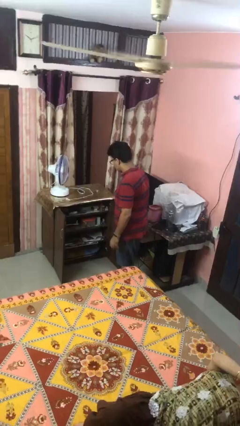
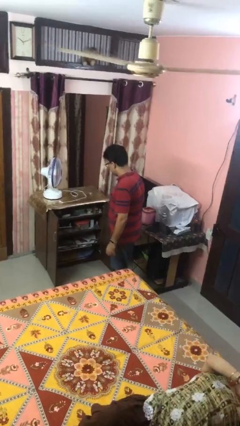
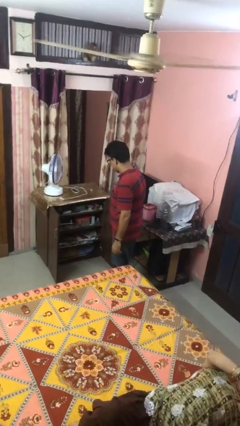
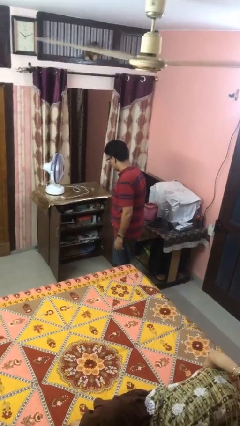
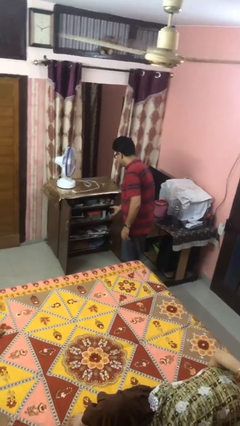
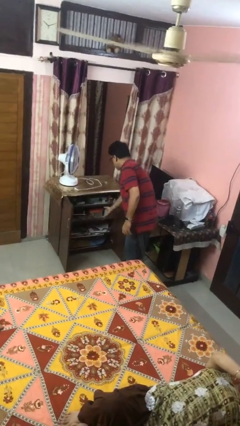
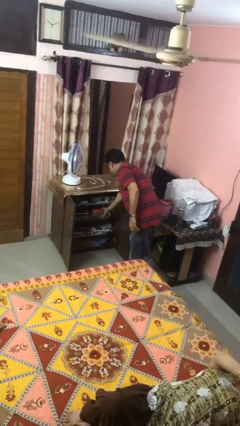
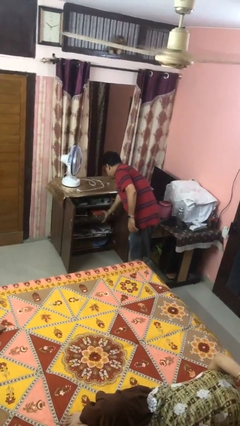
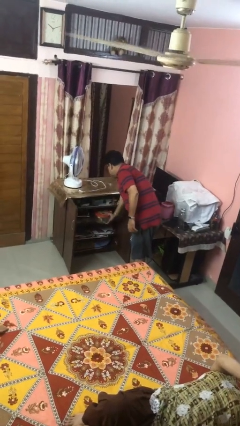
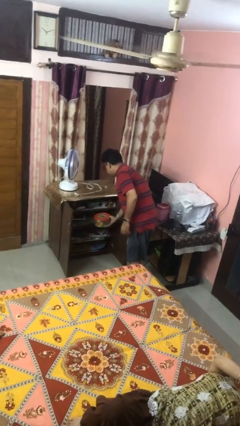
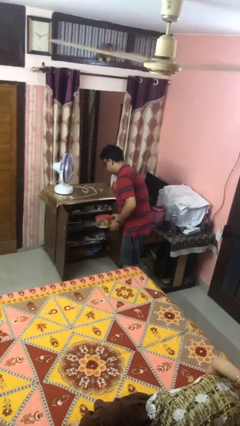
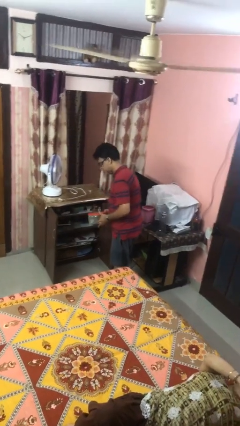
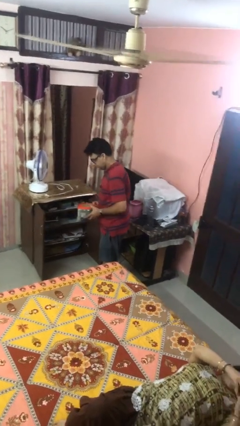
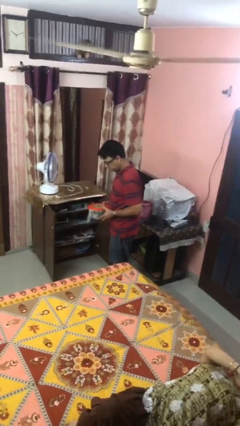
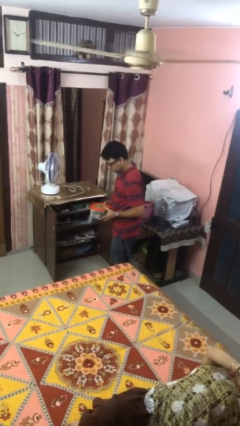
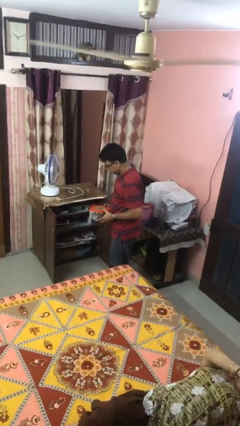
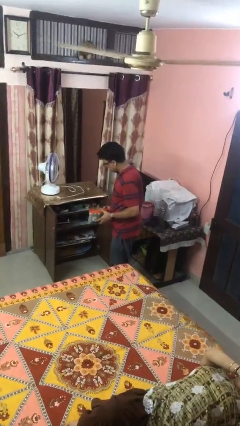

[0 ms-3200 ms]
person picks up object from cabinet

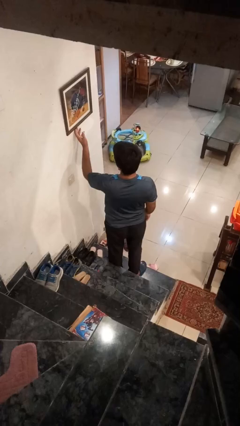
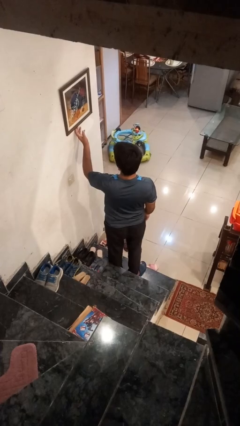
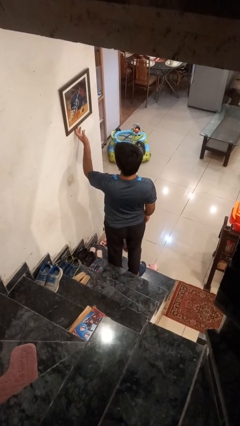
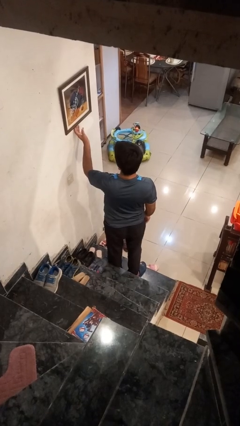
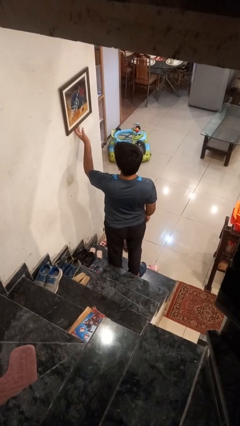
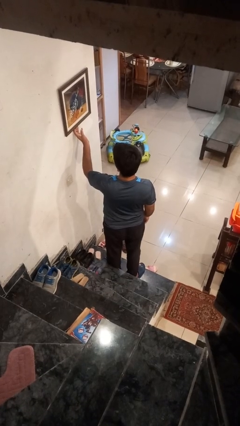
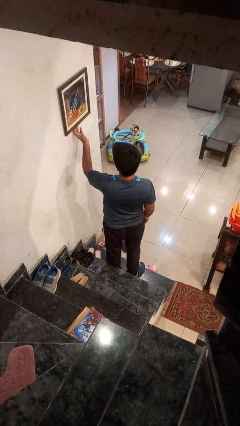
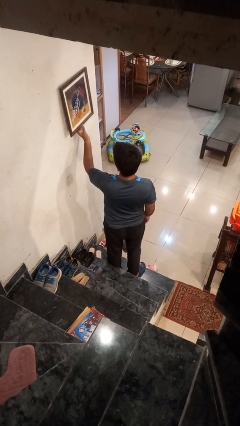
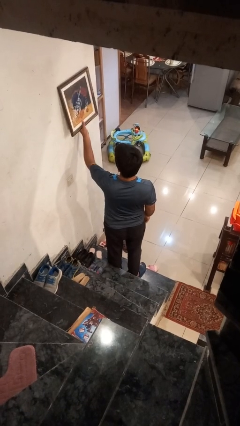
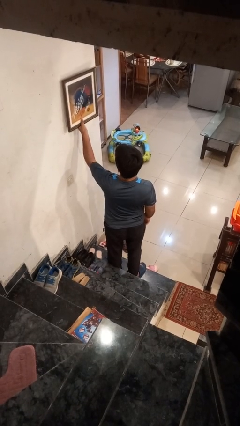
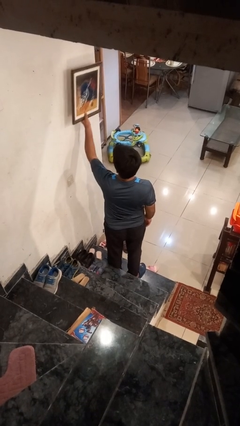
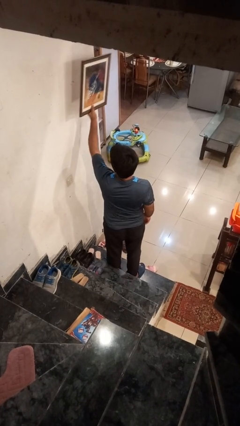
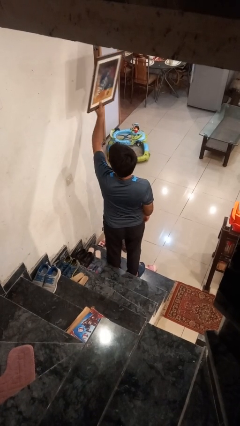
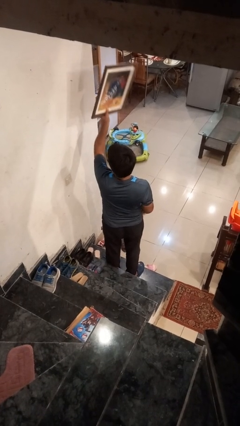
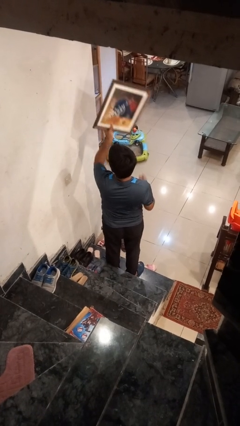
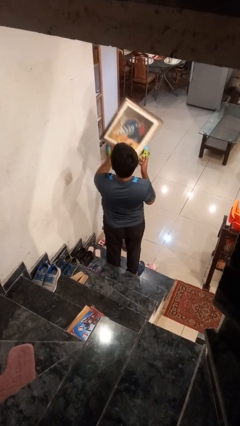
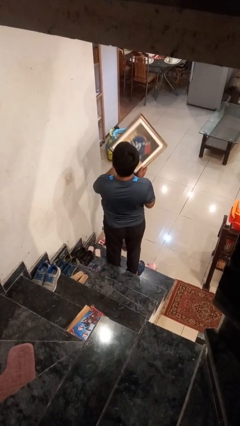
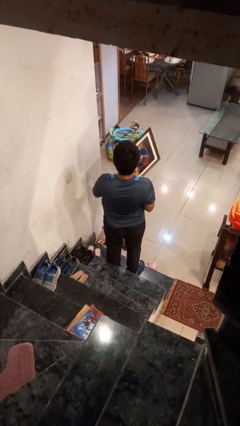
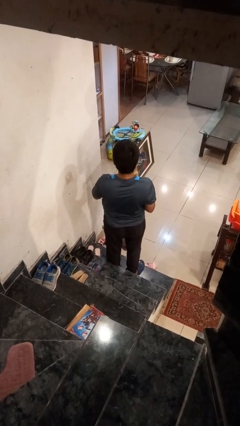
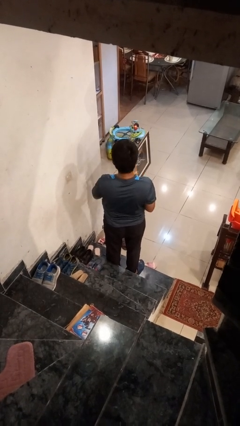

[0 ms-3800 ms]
person takes down picture frame

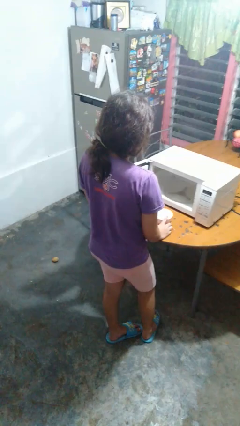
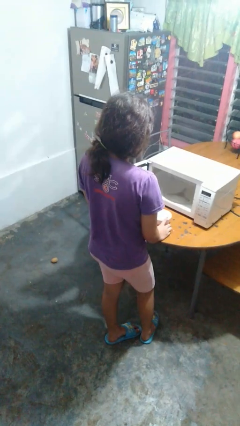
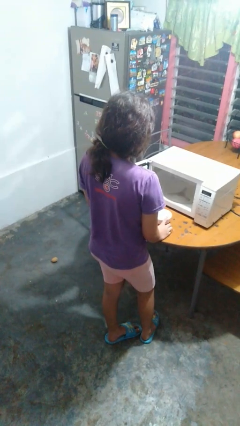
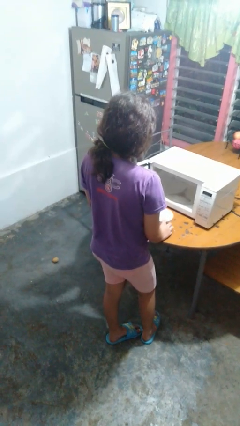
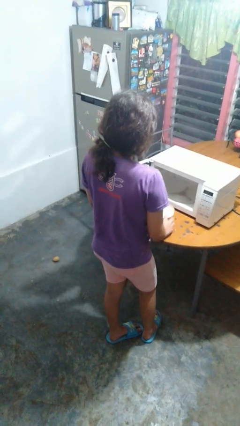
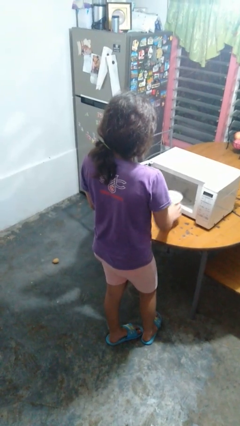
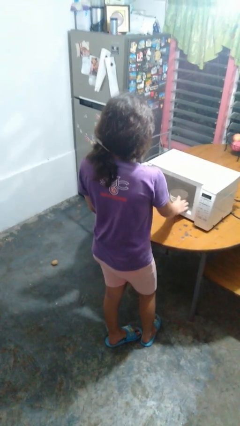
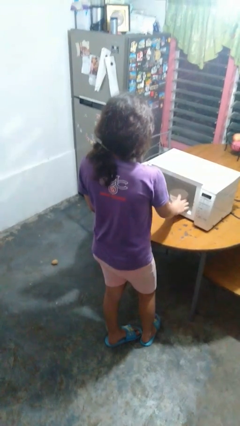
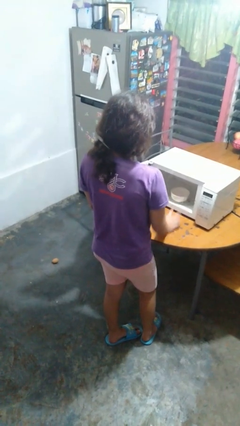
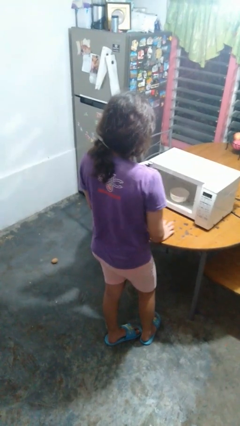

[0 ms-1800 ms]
person puts object into microwave

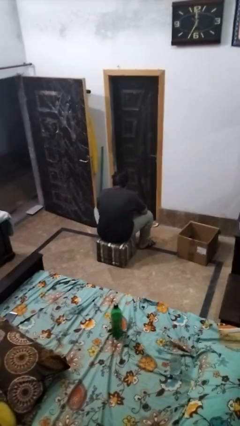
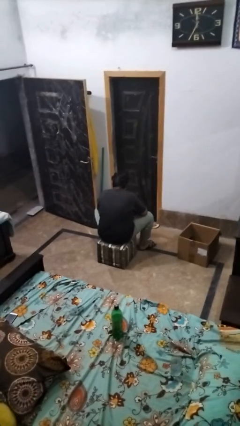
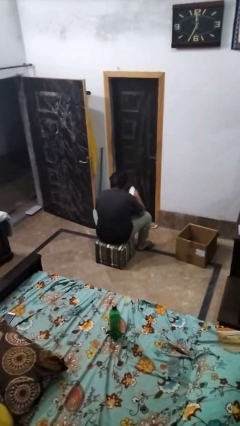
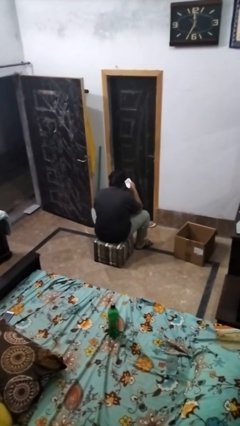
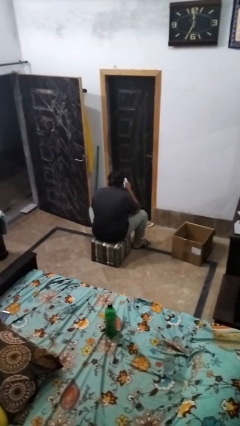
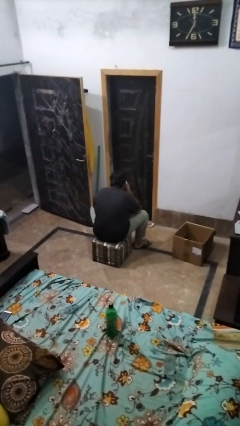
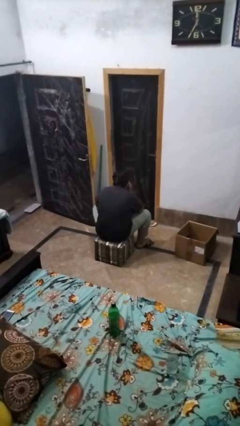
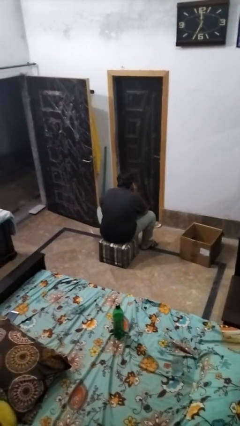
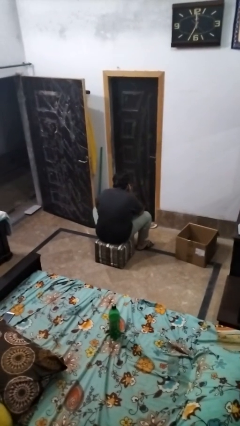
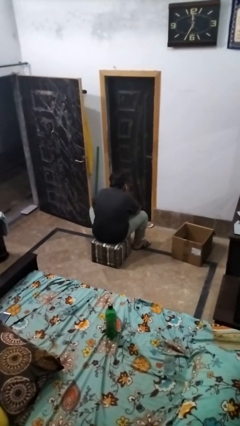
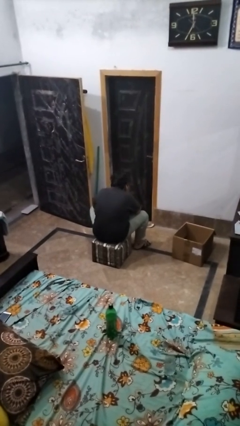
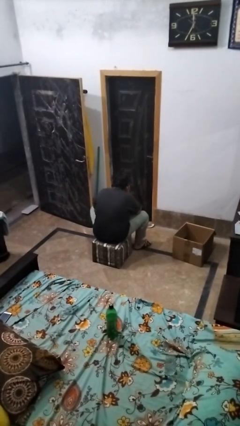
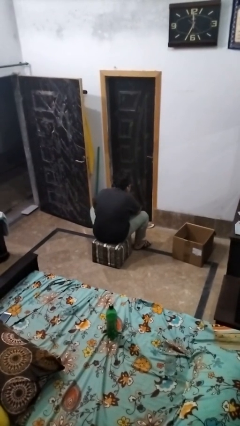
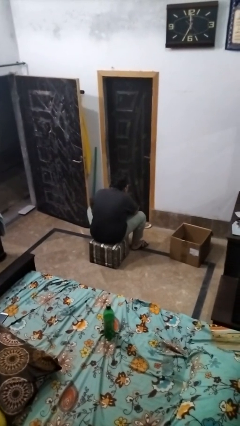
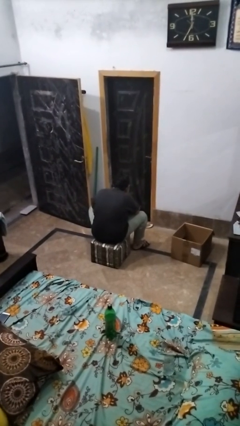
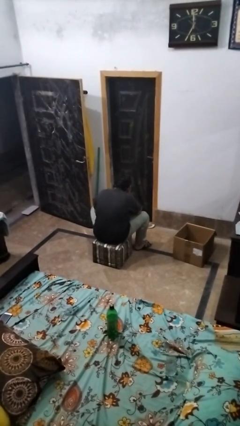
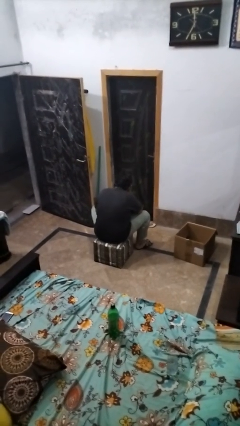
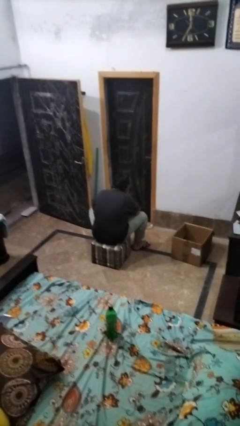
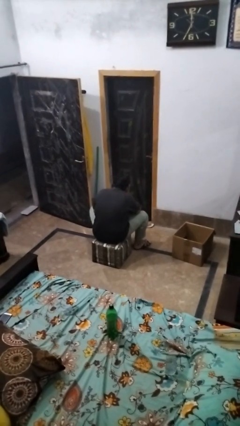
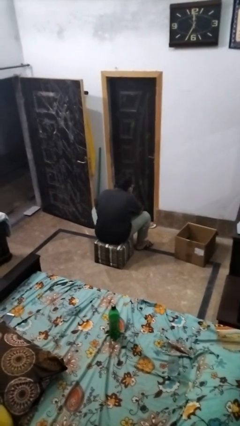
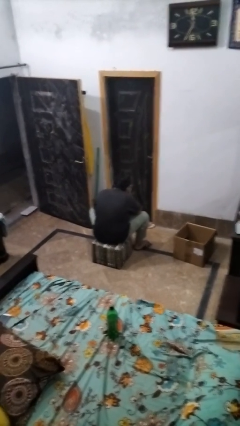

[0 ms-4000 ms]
person blows nose

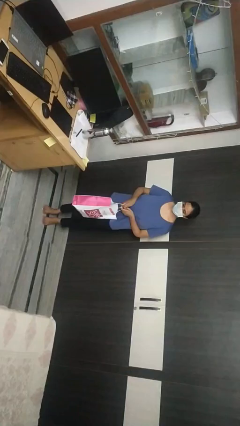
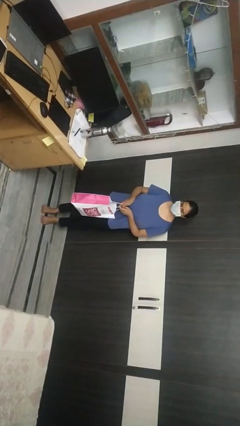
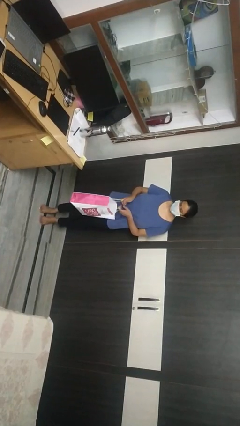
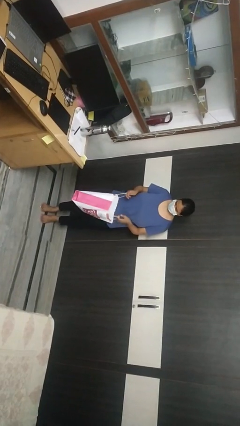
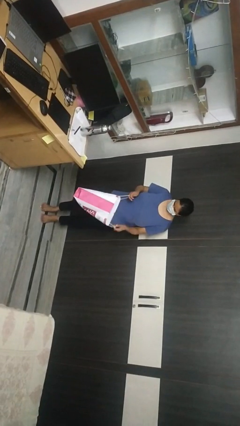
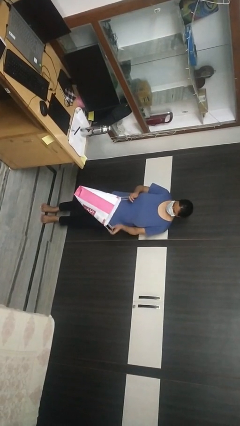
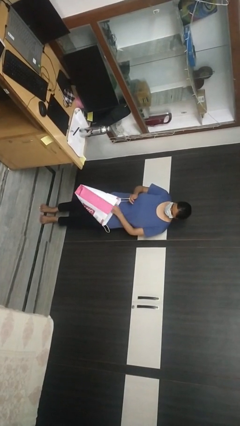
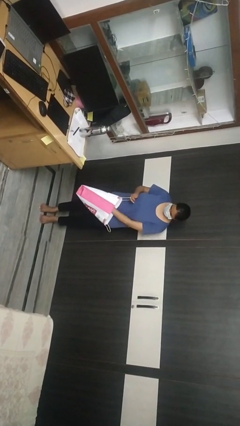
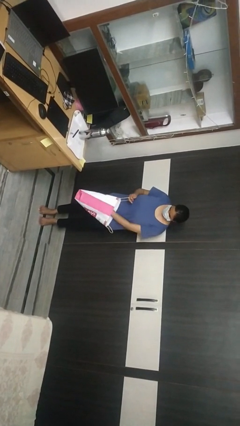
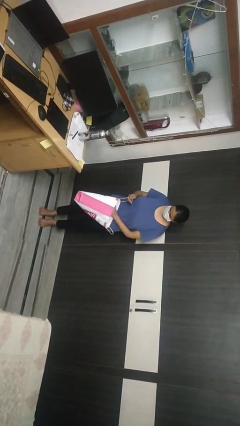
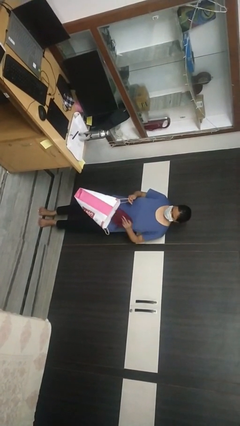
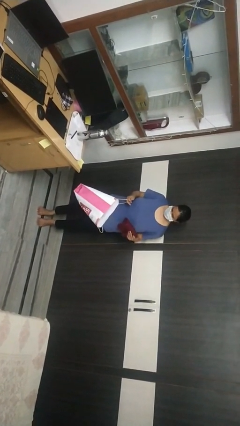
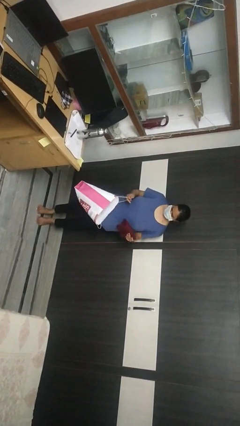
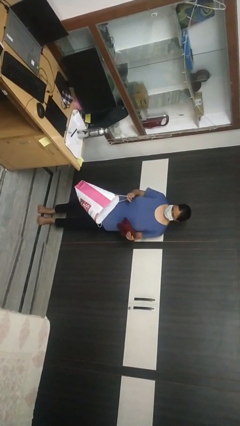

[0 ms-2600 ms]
person takes object from bag

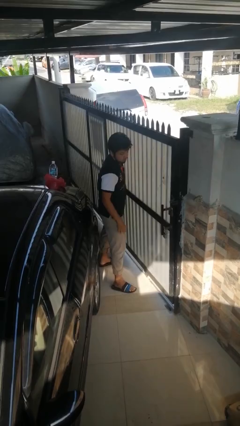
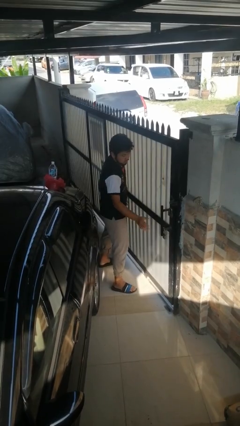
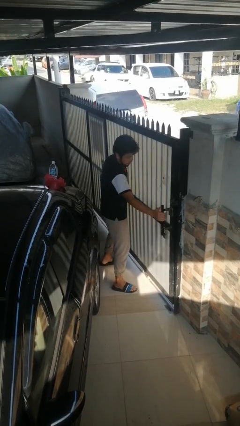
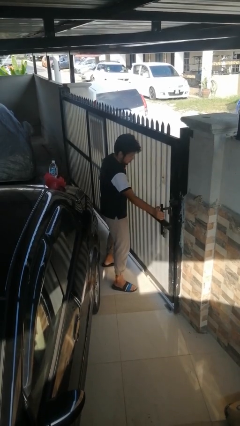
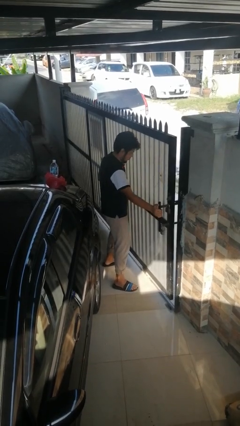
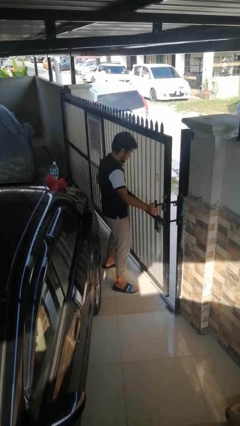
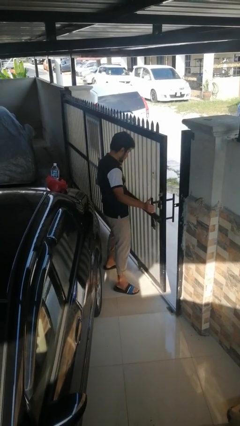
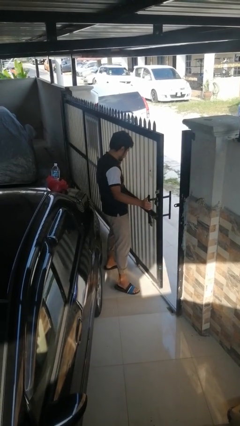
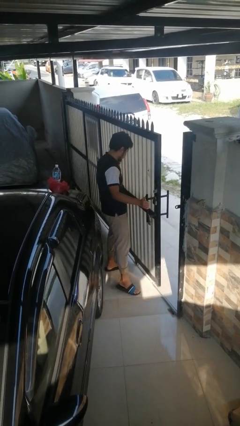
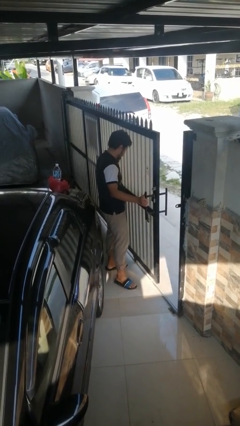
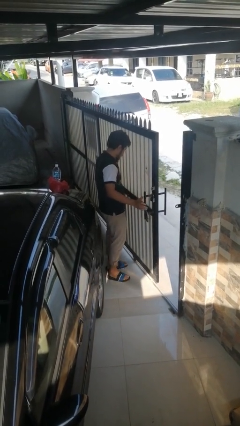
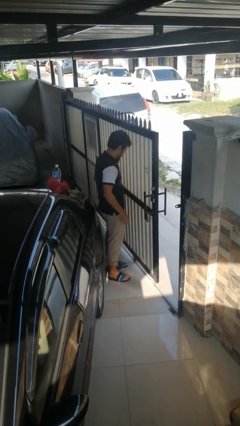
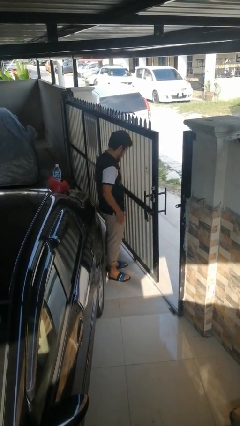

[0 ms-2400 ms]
person opens sliding door
